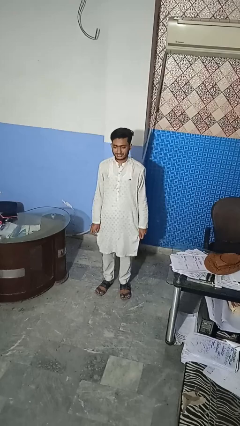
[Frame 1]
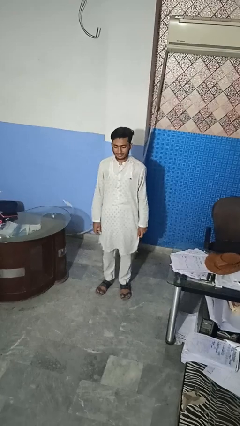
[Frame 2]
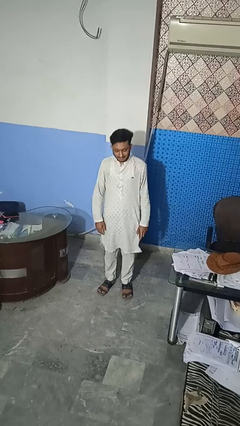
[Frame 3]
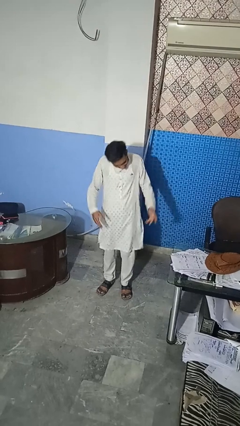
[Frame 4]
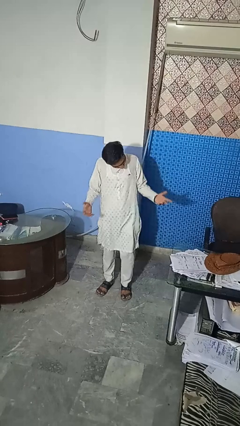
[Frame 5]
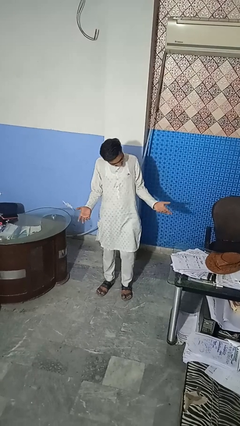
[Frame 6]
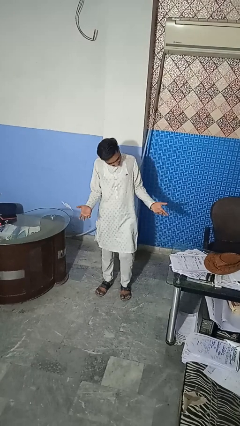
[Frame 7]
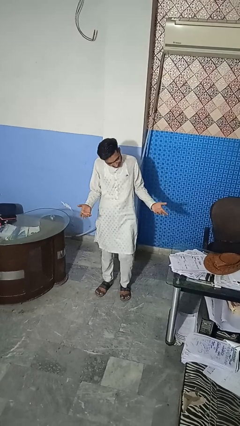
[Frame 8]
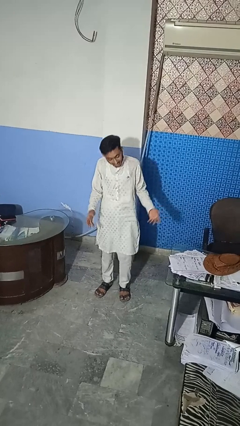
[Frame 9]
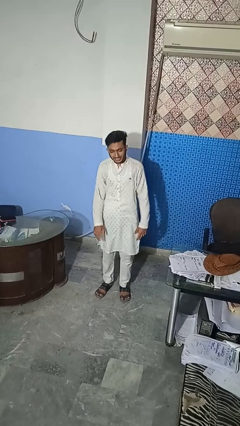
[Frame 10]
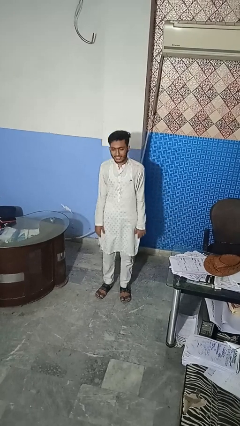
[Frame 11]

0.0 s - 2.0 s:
person shrugs

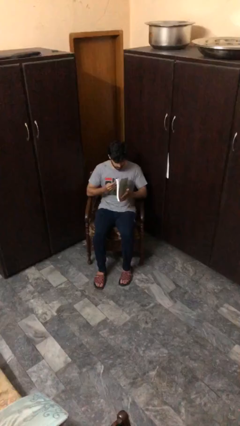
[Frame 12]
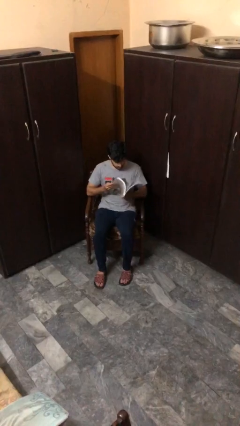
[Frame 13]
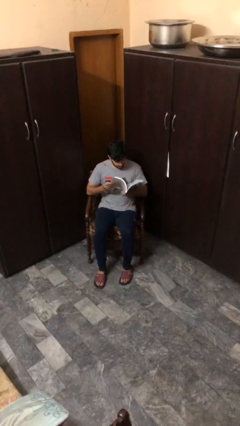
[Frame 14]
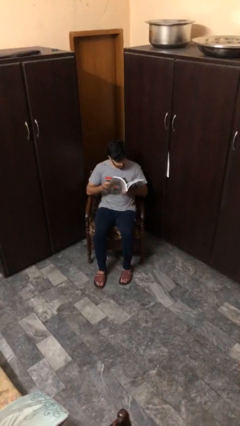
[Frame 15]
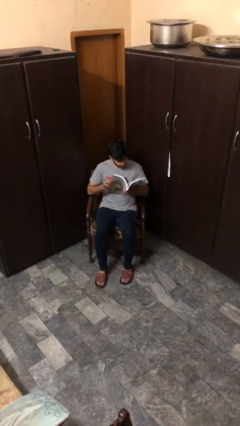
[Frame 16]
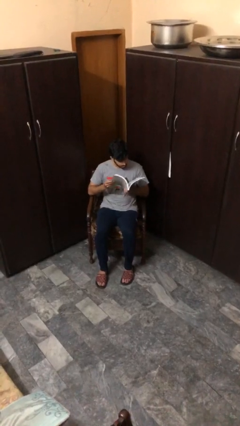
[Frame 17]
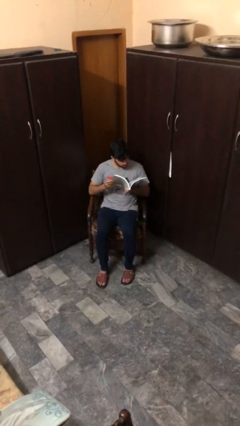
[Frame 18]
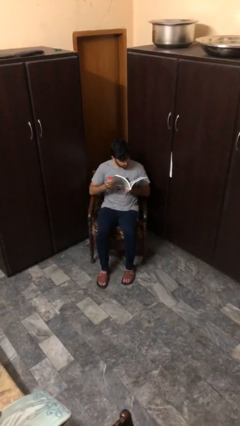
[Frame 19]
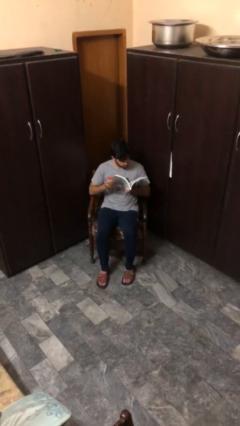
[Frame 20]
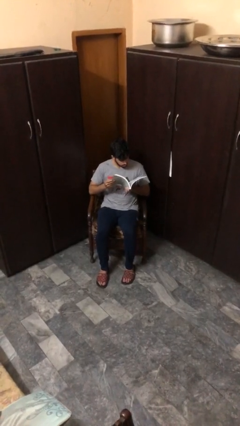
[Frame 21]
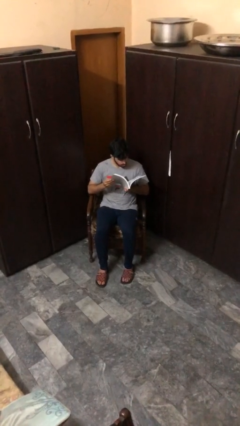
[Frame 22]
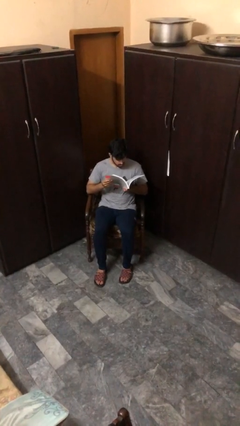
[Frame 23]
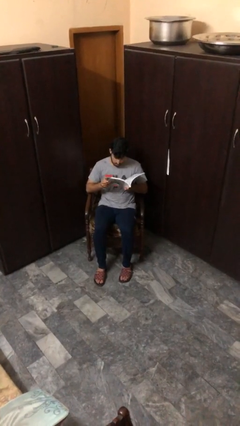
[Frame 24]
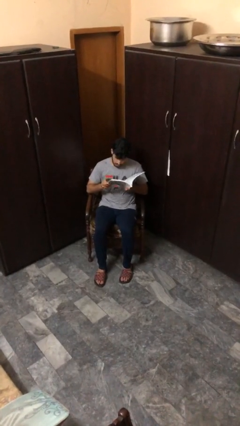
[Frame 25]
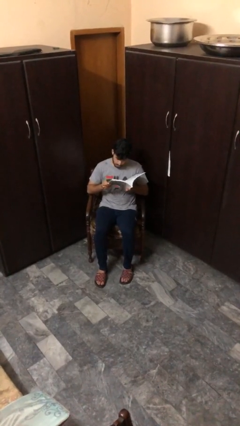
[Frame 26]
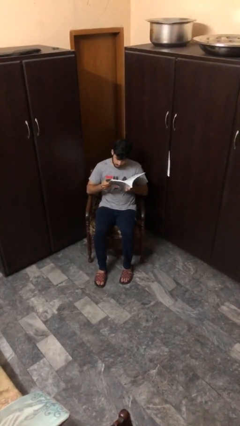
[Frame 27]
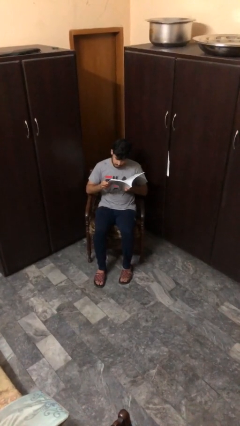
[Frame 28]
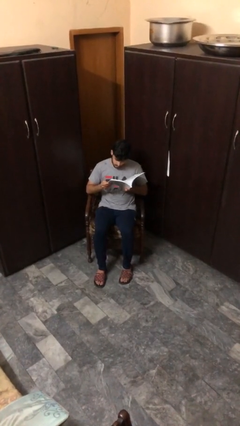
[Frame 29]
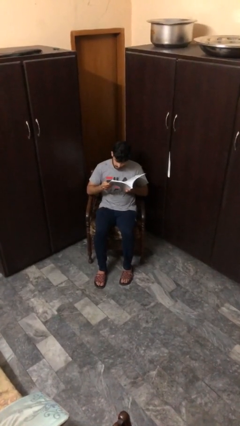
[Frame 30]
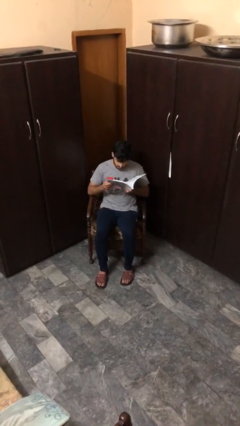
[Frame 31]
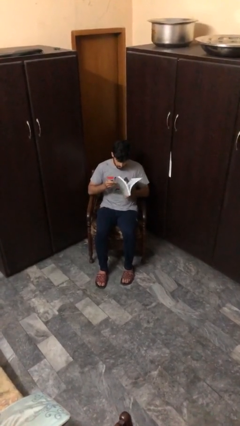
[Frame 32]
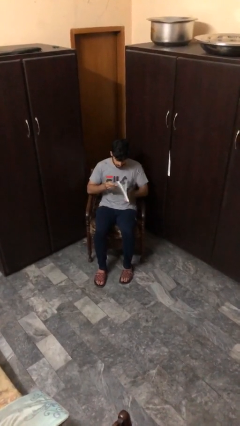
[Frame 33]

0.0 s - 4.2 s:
person reads book

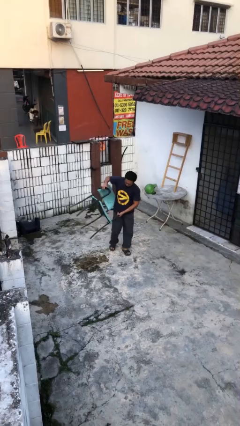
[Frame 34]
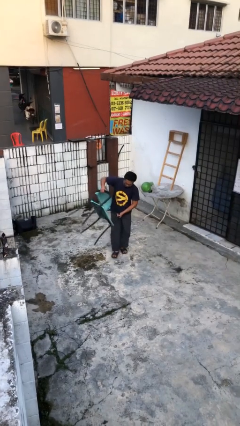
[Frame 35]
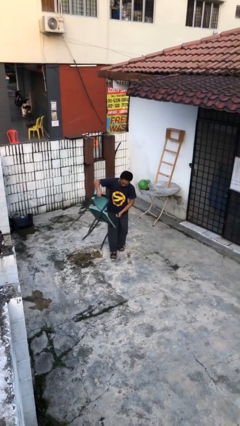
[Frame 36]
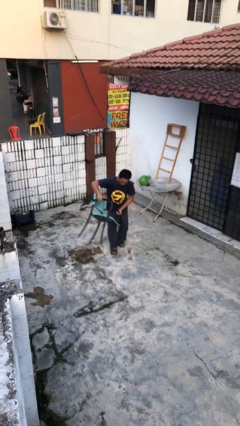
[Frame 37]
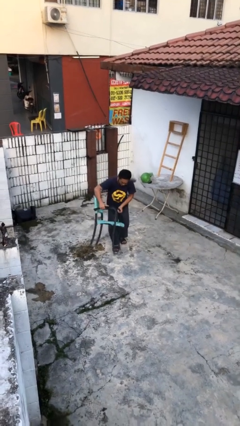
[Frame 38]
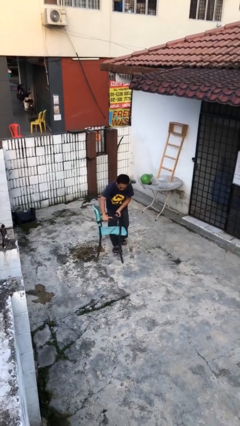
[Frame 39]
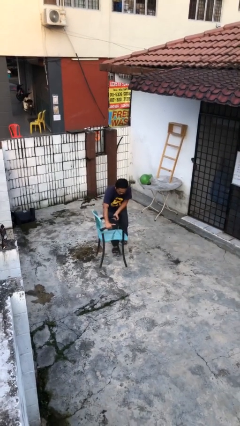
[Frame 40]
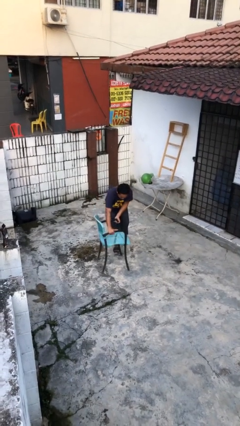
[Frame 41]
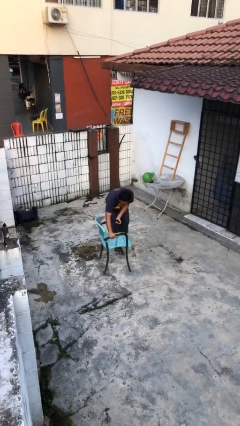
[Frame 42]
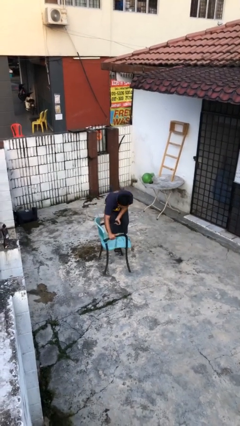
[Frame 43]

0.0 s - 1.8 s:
person puts down object on floor

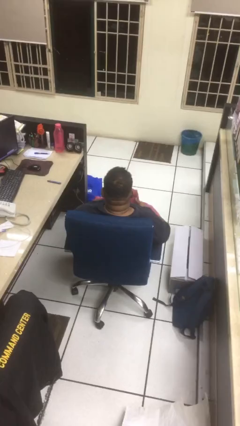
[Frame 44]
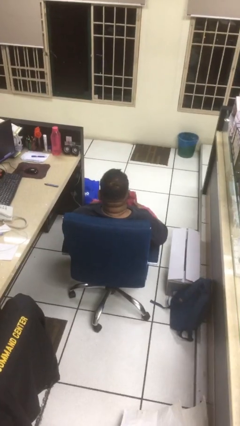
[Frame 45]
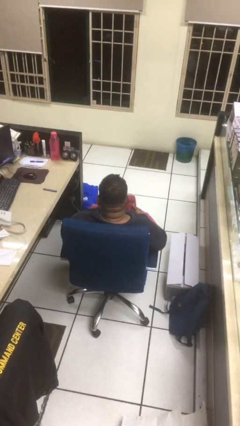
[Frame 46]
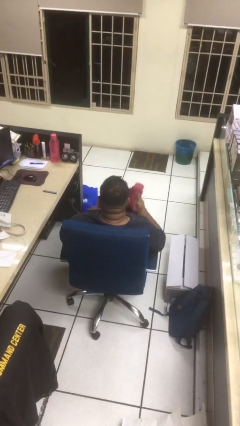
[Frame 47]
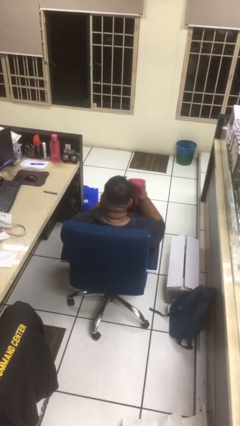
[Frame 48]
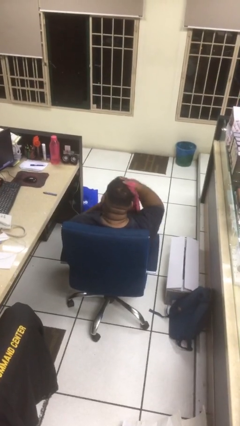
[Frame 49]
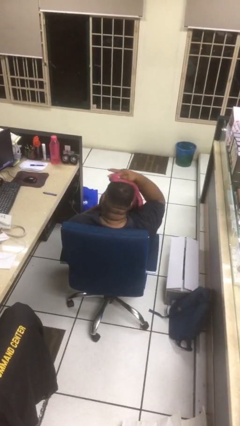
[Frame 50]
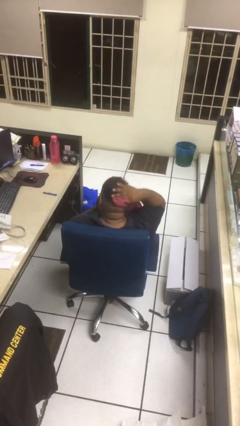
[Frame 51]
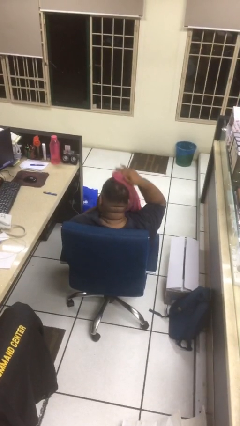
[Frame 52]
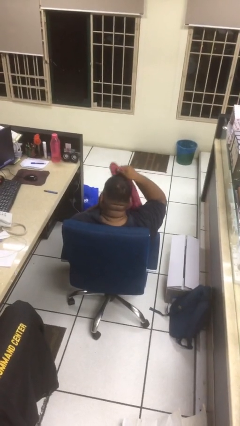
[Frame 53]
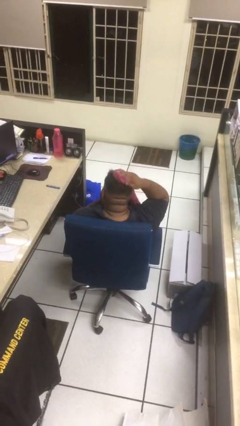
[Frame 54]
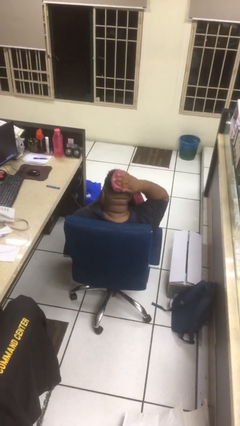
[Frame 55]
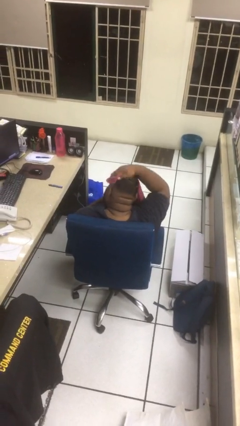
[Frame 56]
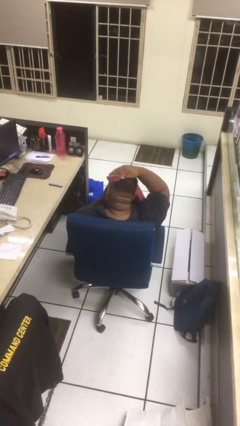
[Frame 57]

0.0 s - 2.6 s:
person dries hair with towel

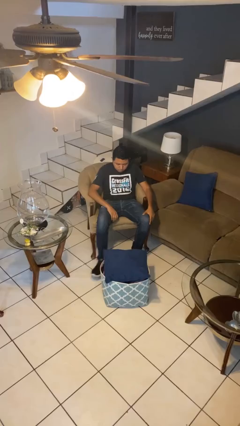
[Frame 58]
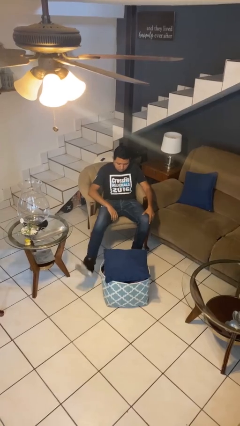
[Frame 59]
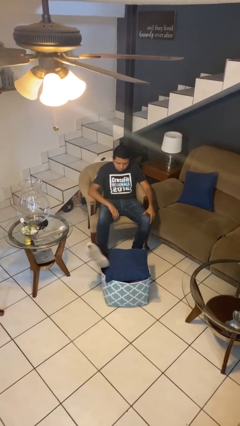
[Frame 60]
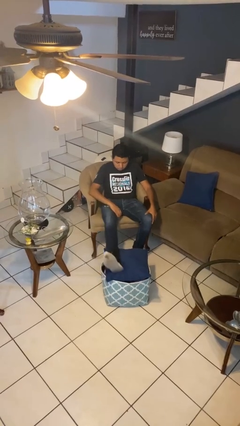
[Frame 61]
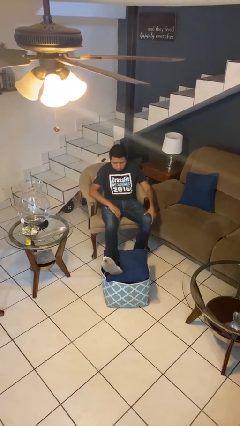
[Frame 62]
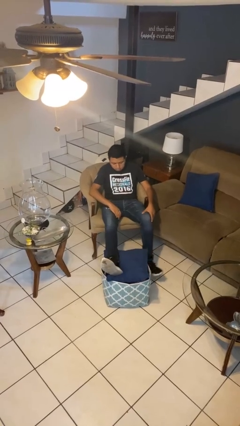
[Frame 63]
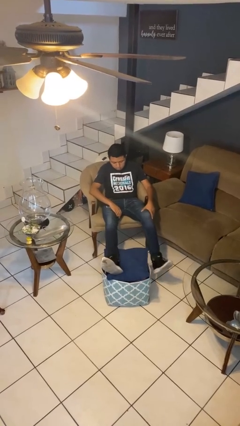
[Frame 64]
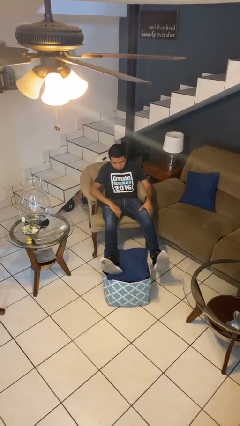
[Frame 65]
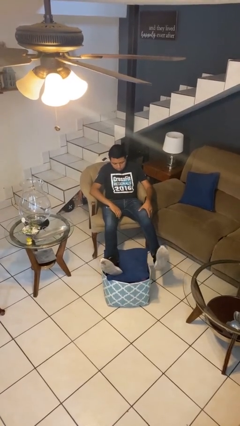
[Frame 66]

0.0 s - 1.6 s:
person puts feet up

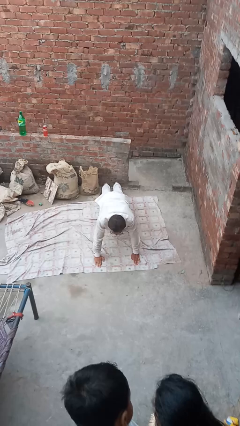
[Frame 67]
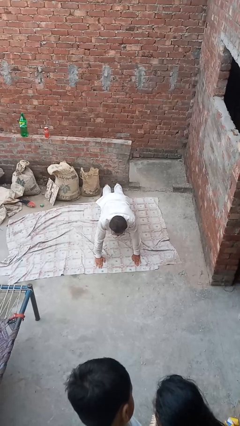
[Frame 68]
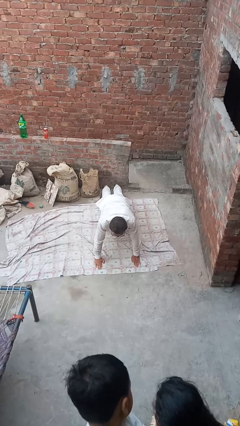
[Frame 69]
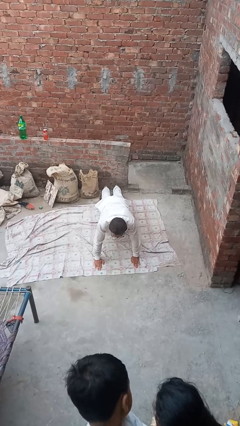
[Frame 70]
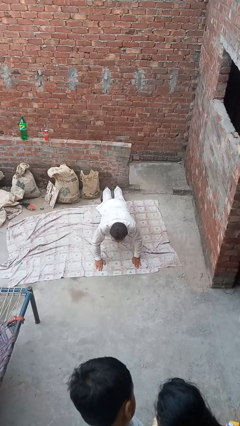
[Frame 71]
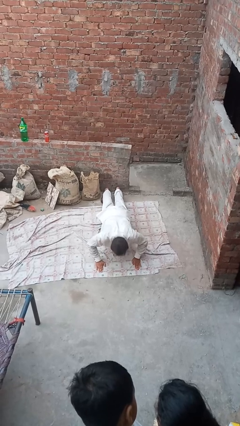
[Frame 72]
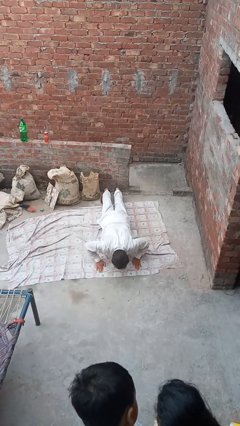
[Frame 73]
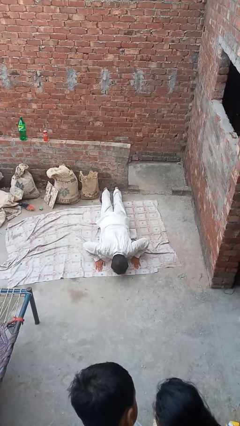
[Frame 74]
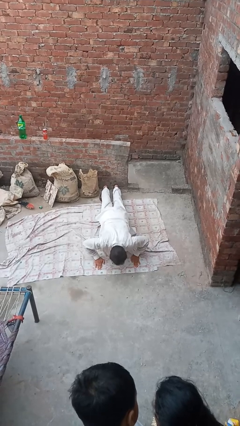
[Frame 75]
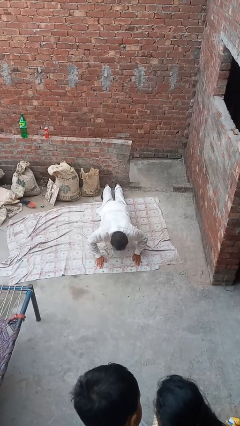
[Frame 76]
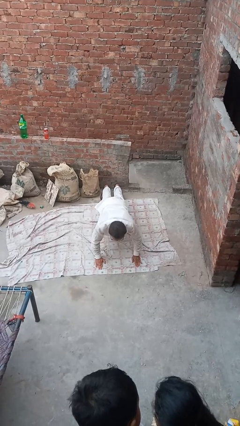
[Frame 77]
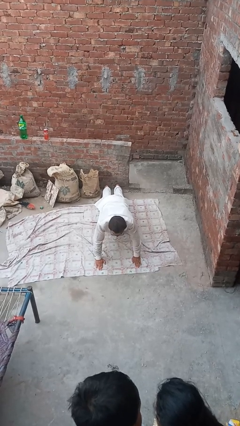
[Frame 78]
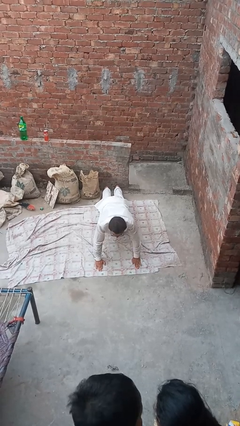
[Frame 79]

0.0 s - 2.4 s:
person exercises with pushup

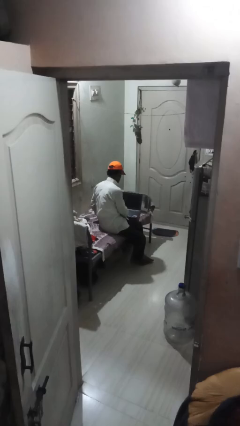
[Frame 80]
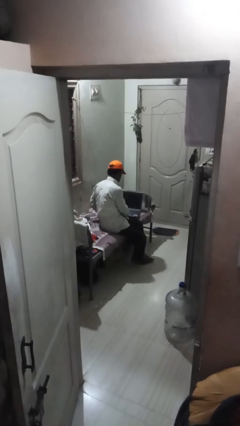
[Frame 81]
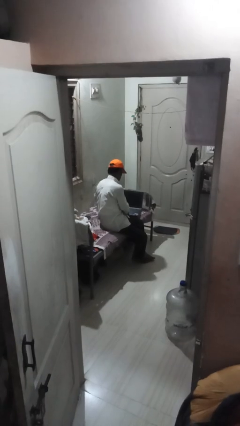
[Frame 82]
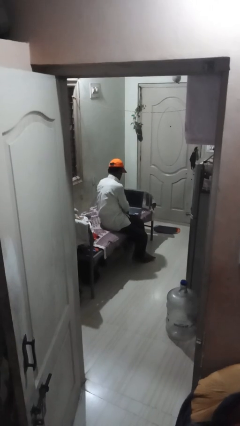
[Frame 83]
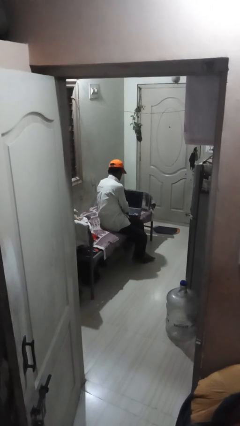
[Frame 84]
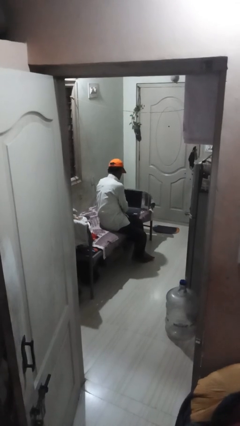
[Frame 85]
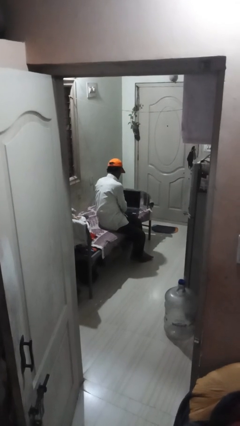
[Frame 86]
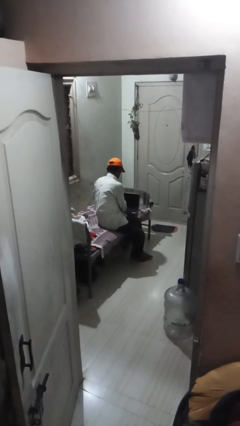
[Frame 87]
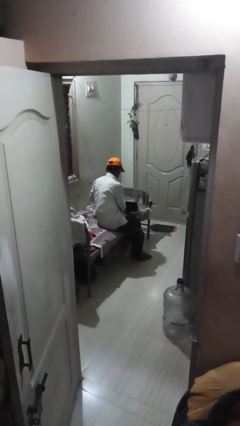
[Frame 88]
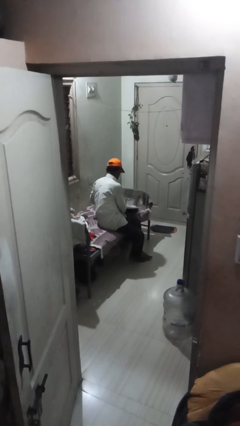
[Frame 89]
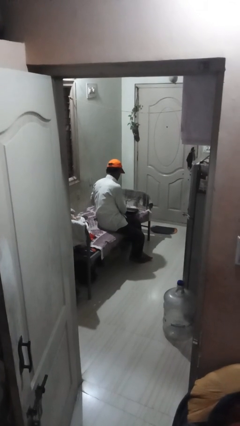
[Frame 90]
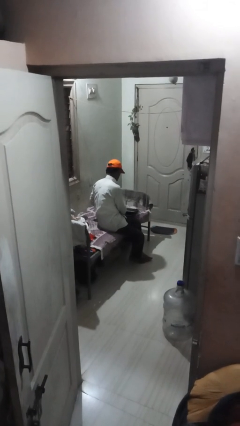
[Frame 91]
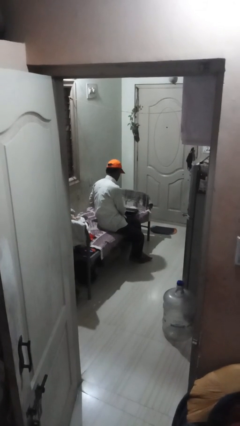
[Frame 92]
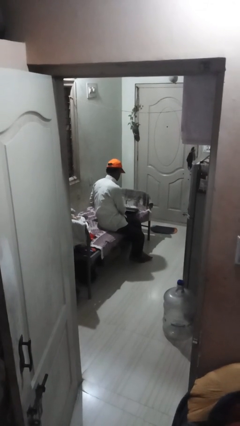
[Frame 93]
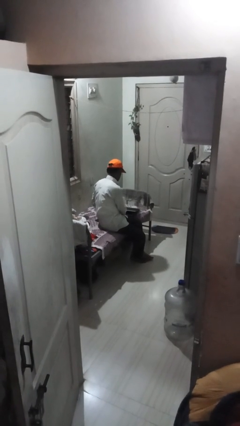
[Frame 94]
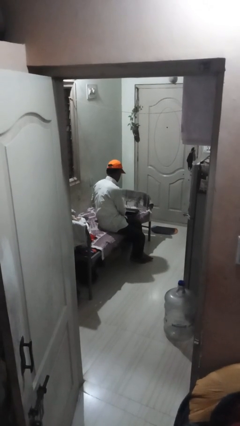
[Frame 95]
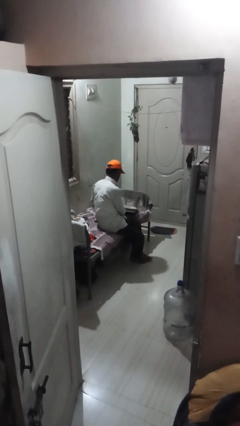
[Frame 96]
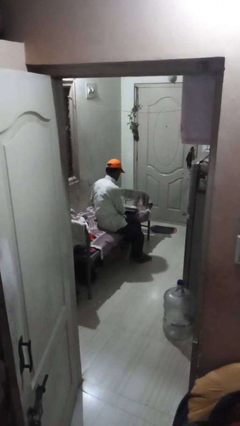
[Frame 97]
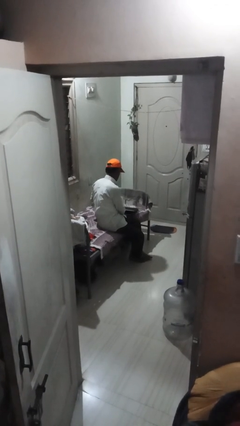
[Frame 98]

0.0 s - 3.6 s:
person closes laptop
